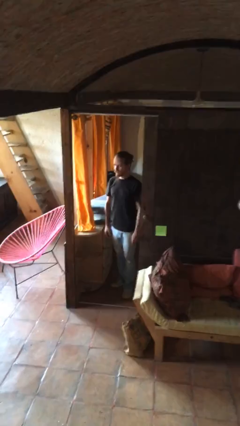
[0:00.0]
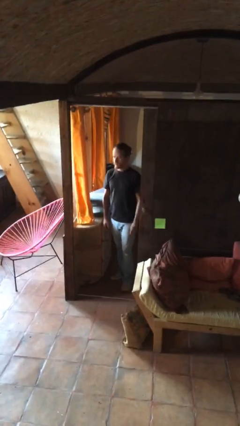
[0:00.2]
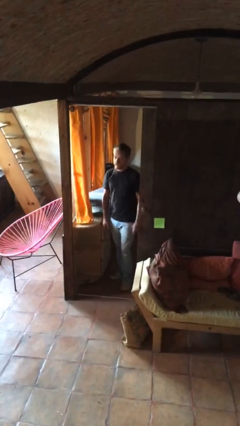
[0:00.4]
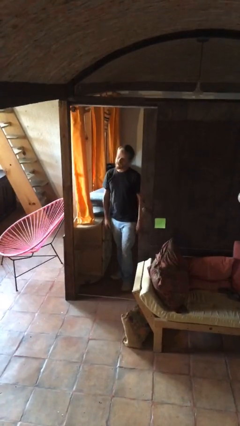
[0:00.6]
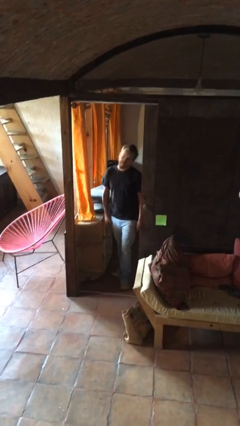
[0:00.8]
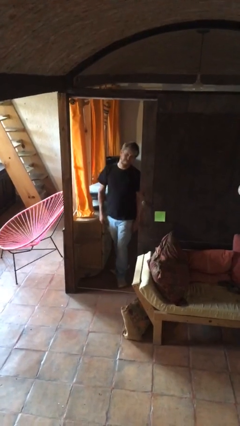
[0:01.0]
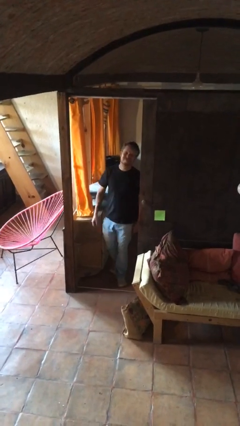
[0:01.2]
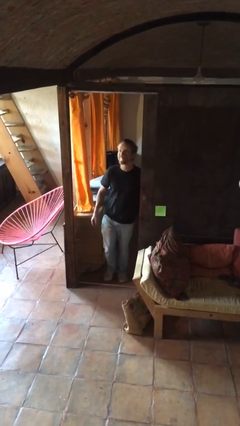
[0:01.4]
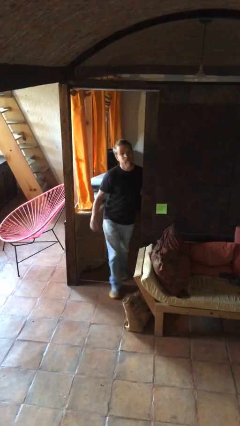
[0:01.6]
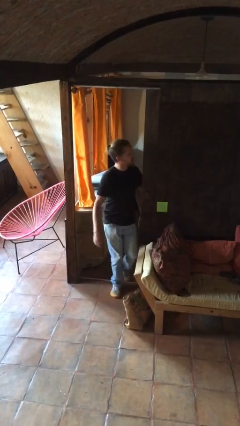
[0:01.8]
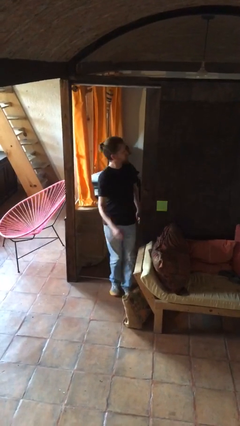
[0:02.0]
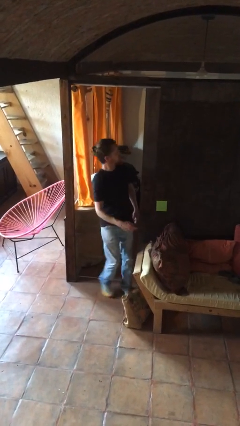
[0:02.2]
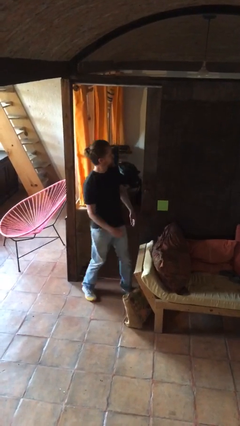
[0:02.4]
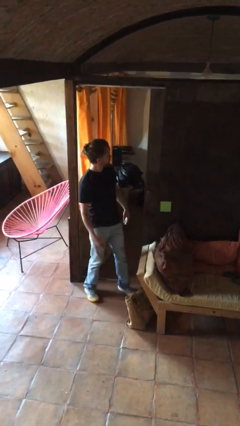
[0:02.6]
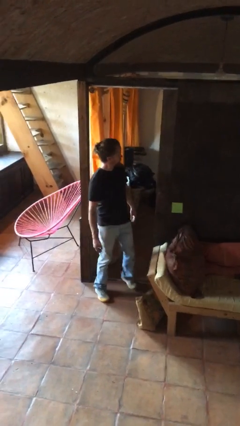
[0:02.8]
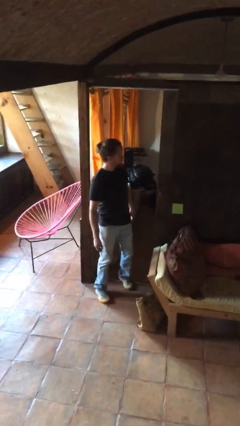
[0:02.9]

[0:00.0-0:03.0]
person bumps into wall

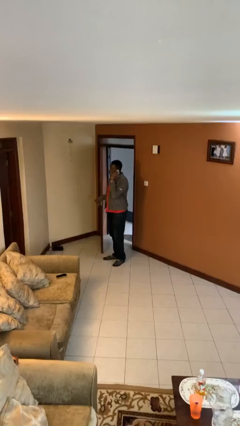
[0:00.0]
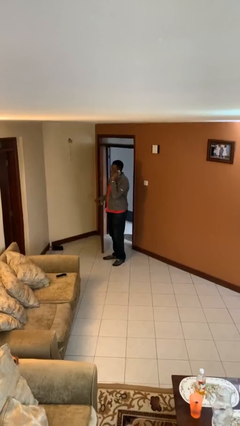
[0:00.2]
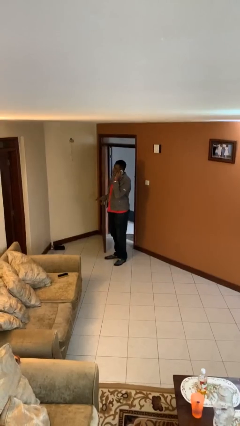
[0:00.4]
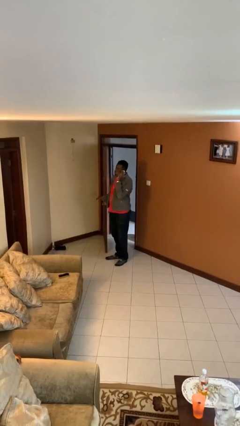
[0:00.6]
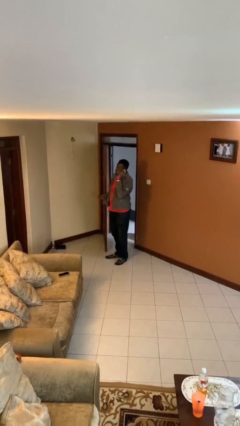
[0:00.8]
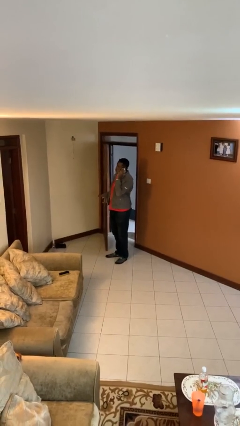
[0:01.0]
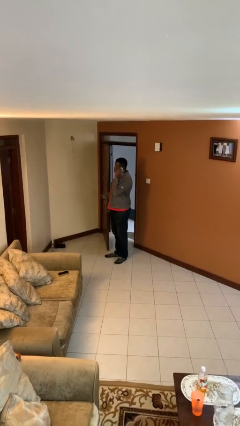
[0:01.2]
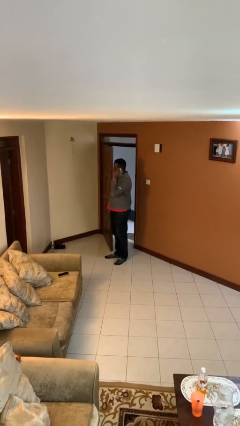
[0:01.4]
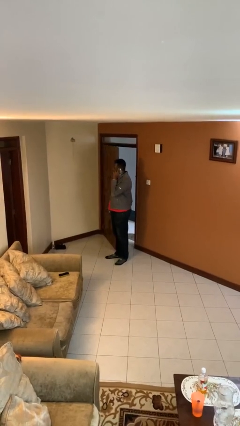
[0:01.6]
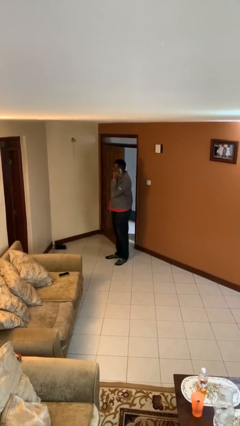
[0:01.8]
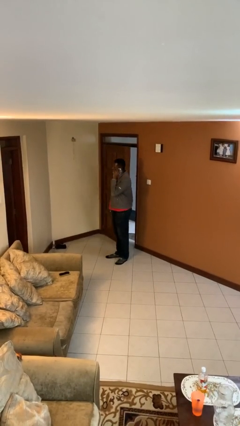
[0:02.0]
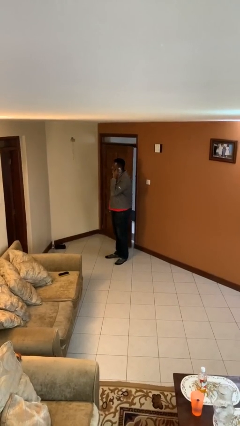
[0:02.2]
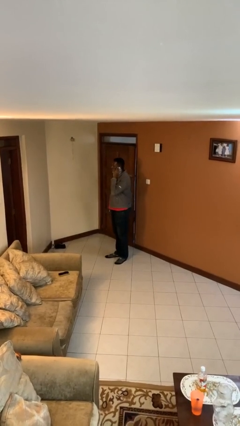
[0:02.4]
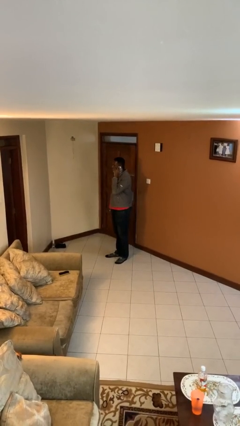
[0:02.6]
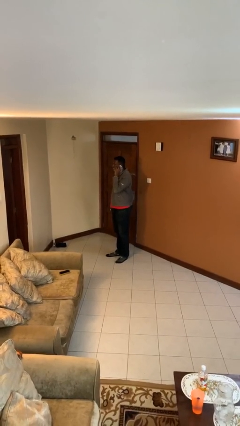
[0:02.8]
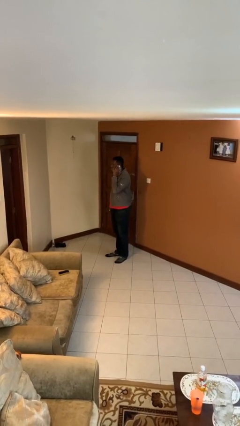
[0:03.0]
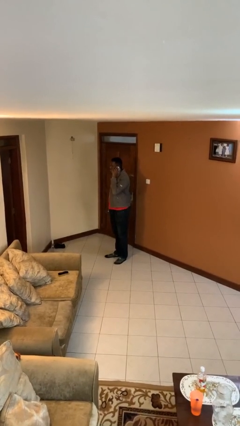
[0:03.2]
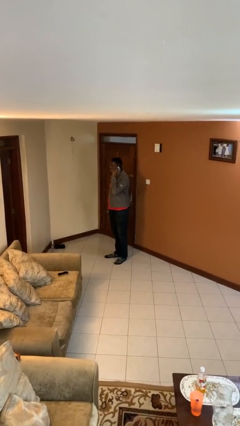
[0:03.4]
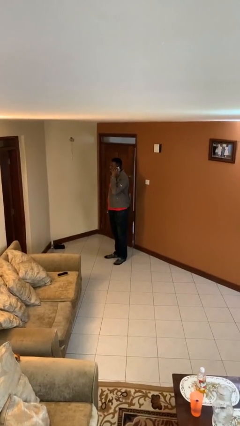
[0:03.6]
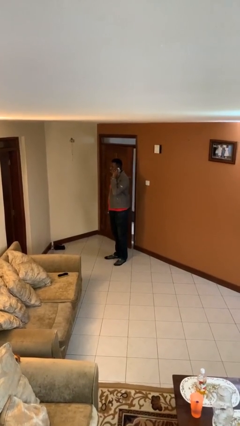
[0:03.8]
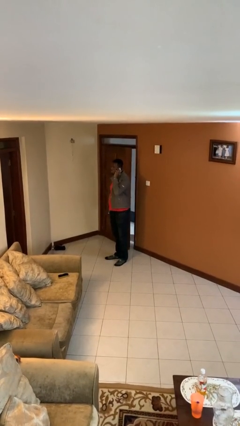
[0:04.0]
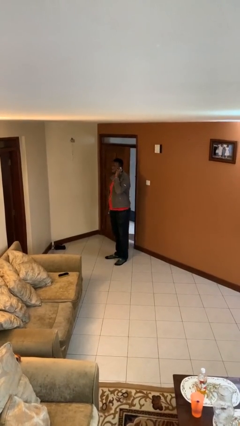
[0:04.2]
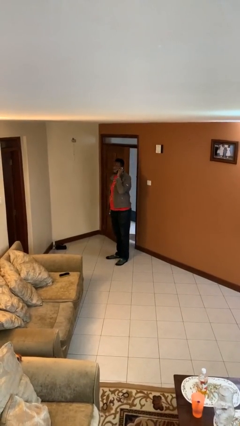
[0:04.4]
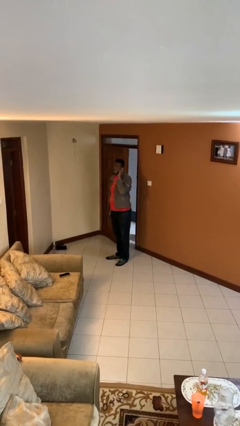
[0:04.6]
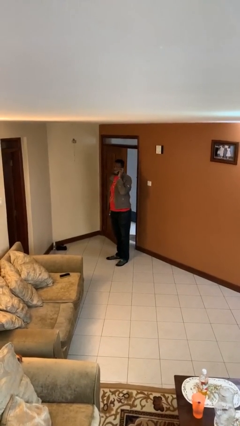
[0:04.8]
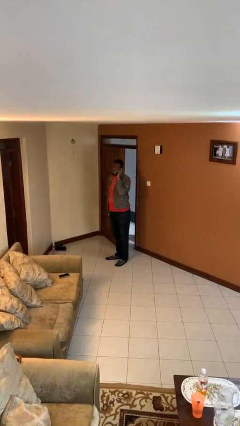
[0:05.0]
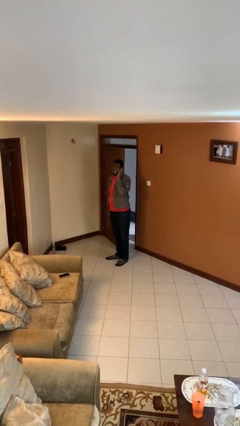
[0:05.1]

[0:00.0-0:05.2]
person closes facility door

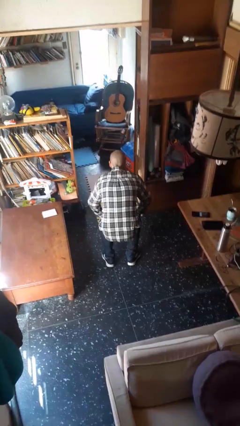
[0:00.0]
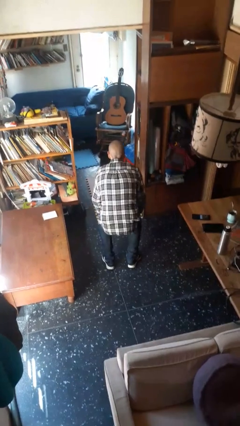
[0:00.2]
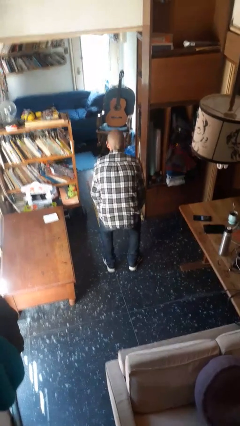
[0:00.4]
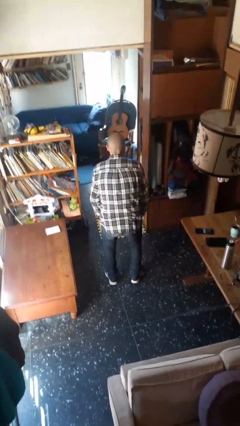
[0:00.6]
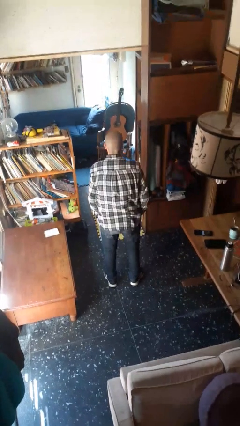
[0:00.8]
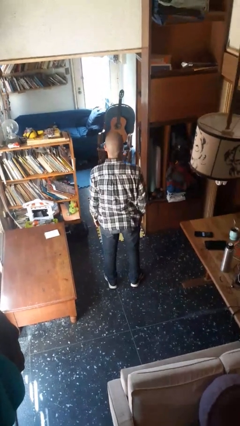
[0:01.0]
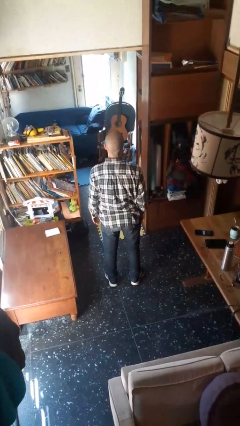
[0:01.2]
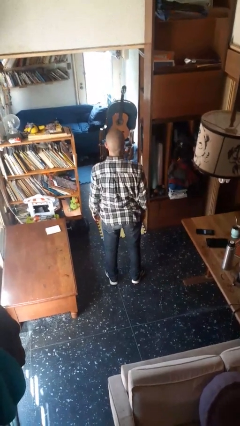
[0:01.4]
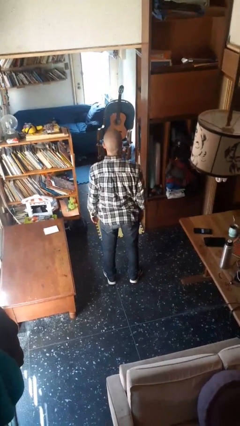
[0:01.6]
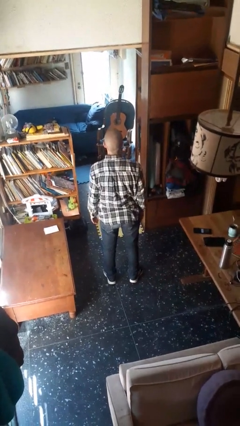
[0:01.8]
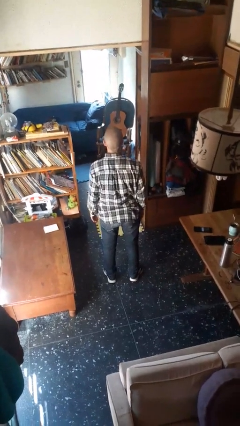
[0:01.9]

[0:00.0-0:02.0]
person stands up

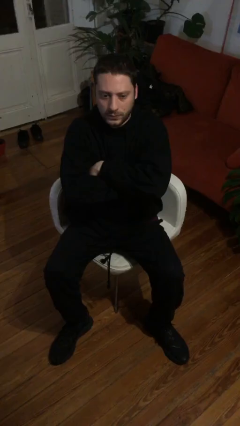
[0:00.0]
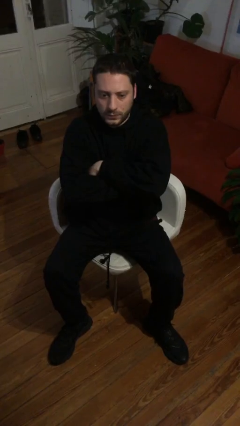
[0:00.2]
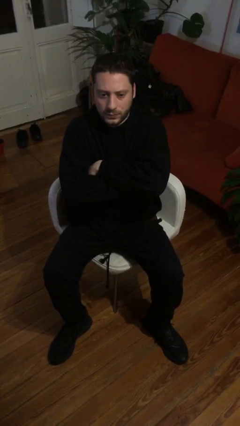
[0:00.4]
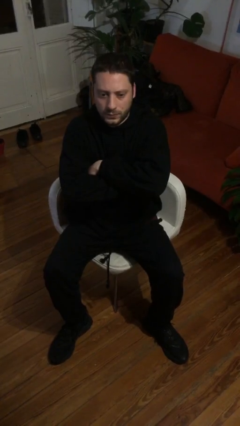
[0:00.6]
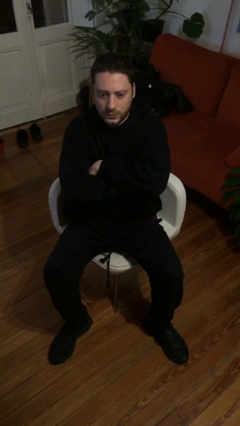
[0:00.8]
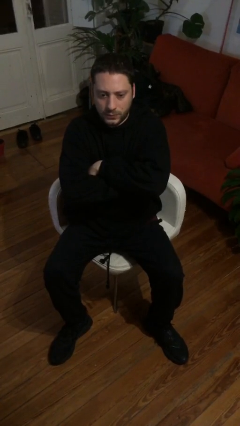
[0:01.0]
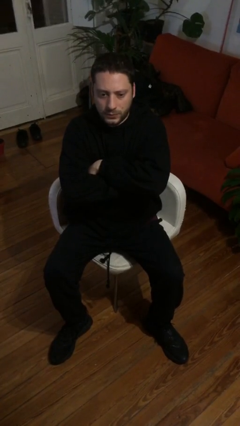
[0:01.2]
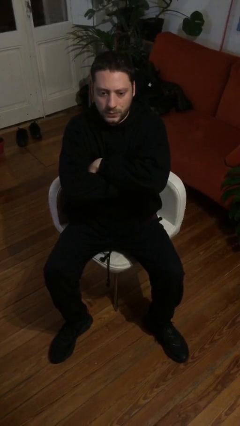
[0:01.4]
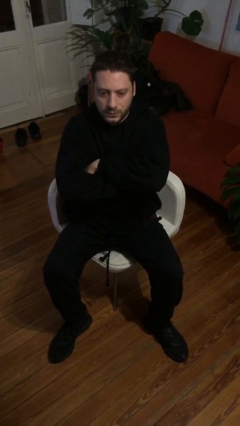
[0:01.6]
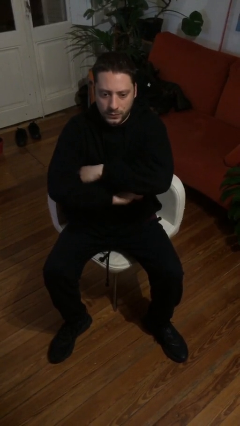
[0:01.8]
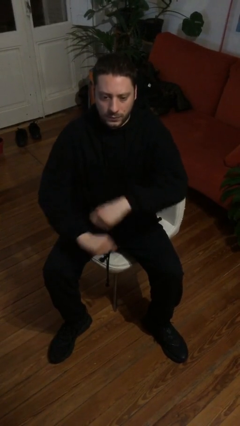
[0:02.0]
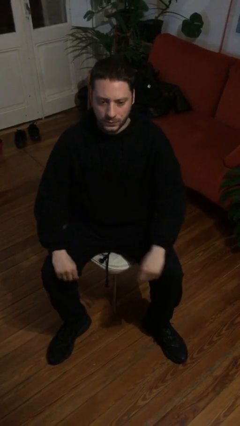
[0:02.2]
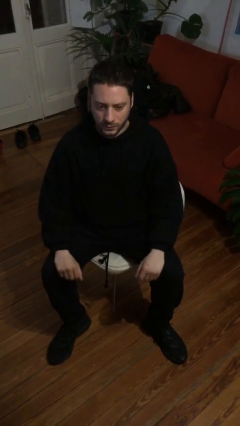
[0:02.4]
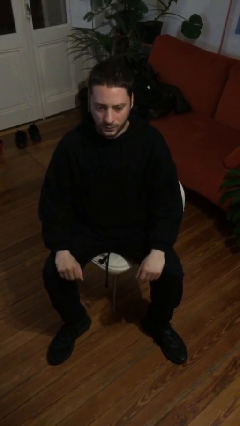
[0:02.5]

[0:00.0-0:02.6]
person crosses arms

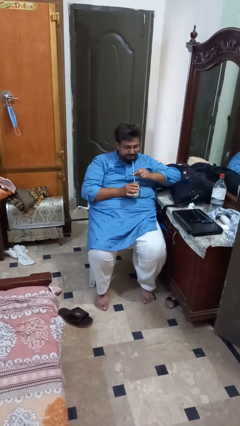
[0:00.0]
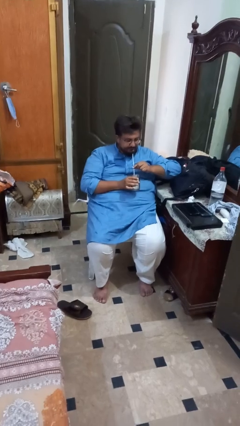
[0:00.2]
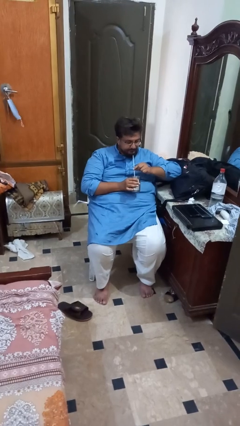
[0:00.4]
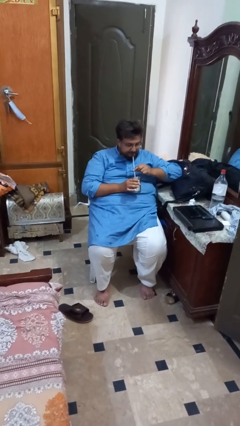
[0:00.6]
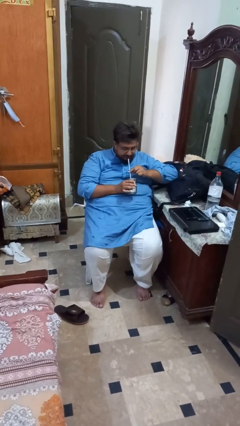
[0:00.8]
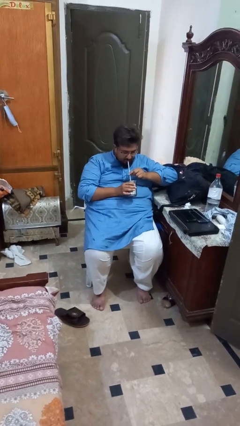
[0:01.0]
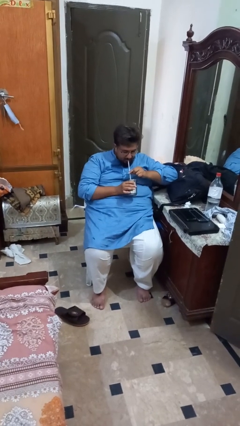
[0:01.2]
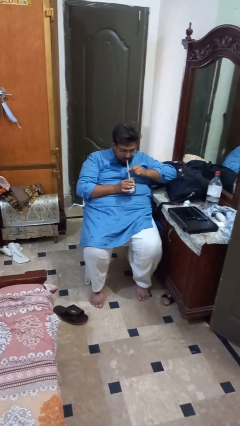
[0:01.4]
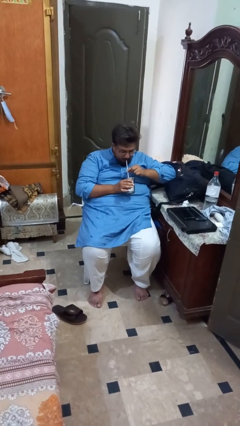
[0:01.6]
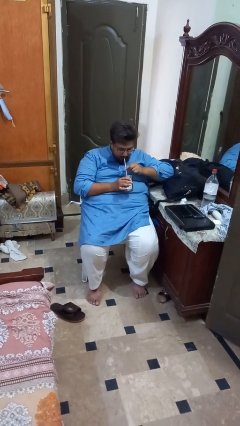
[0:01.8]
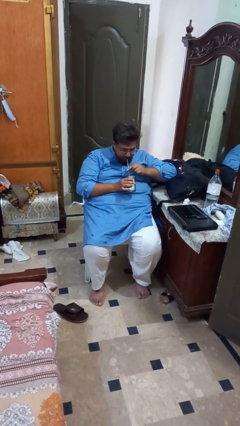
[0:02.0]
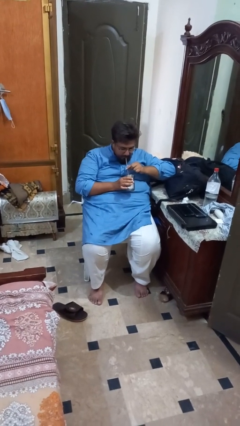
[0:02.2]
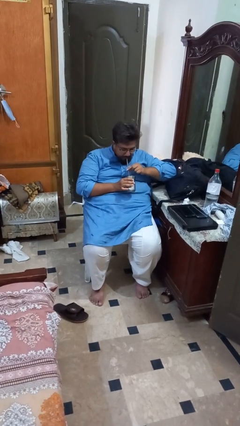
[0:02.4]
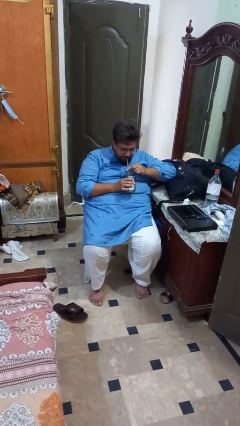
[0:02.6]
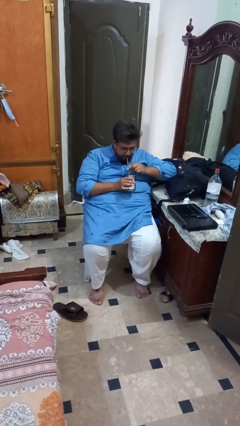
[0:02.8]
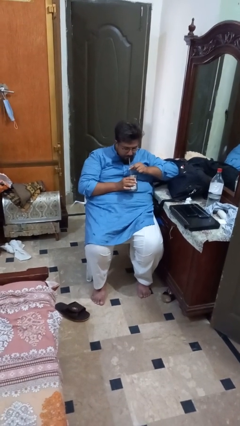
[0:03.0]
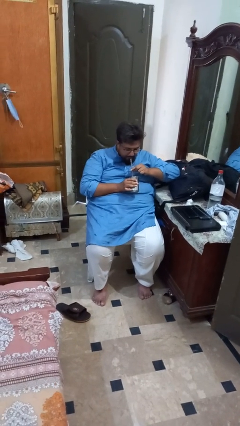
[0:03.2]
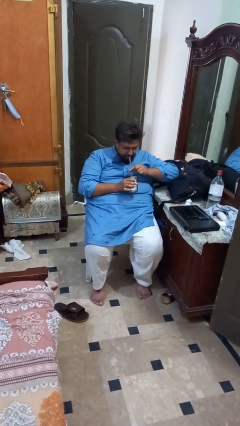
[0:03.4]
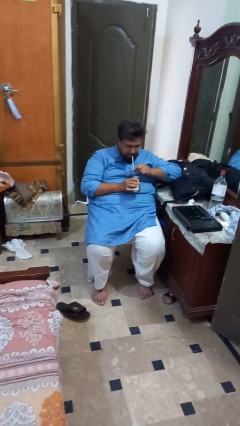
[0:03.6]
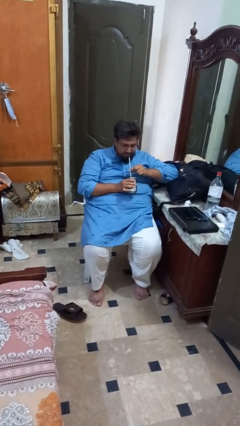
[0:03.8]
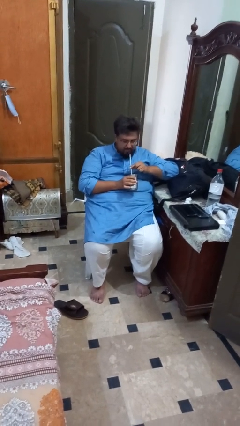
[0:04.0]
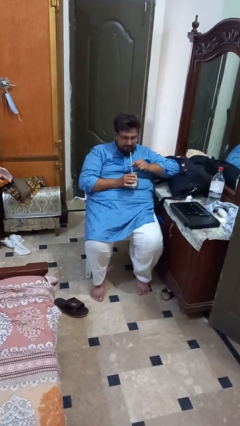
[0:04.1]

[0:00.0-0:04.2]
person drinks from straw

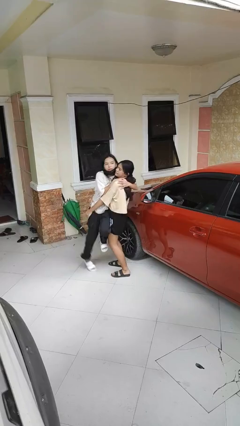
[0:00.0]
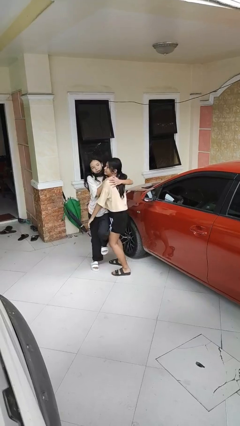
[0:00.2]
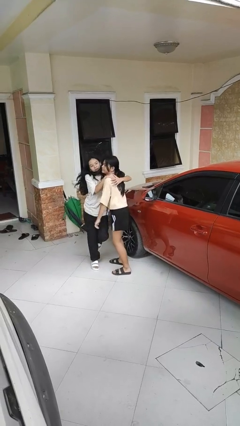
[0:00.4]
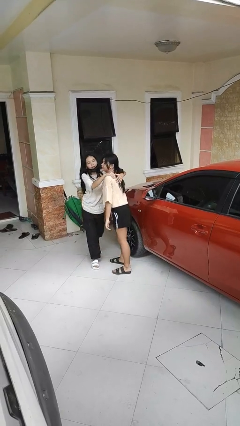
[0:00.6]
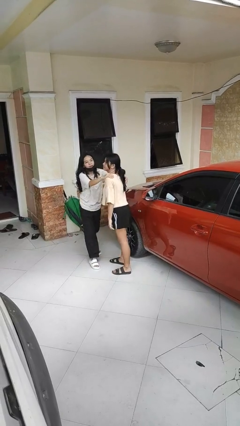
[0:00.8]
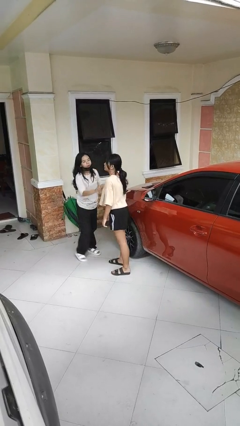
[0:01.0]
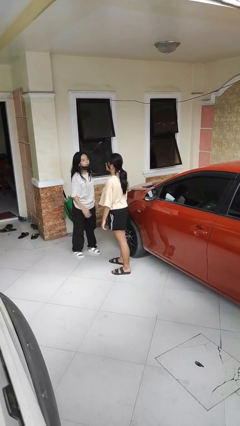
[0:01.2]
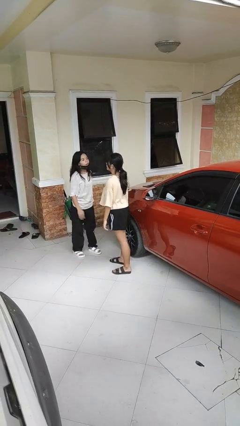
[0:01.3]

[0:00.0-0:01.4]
person puts down person
